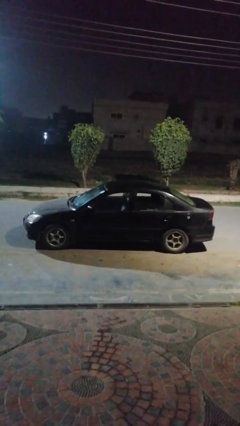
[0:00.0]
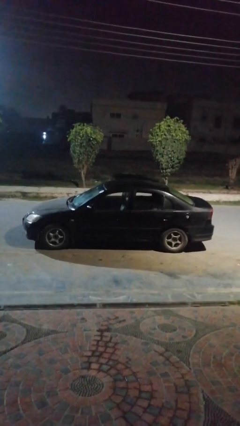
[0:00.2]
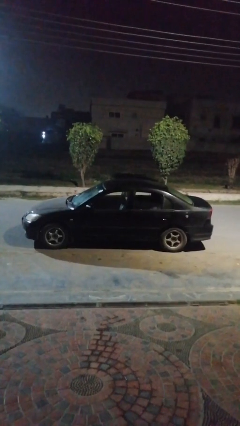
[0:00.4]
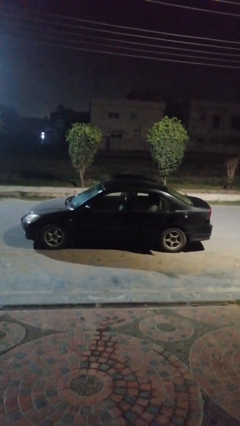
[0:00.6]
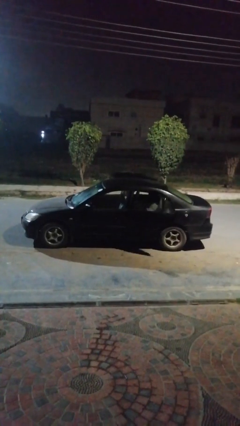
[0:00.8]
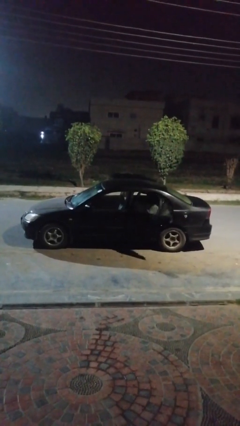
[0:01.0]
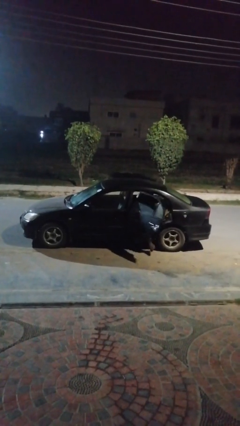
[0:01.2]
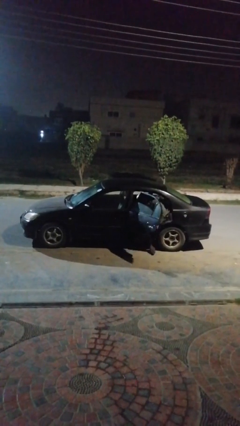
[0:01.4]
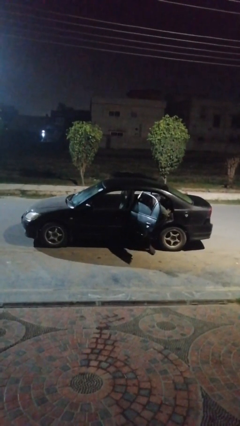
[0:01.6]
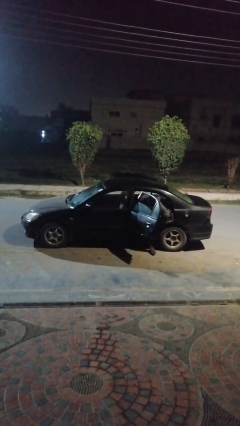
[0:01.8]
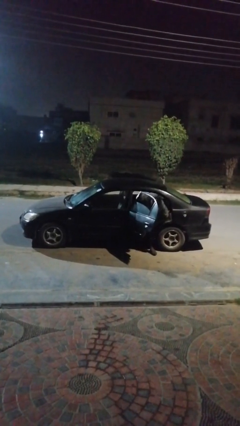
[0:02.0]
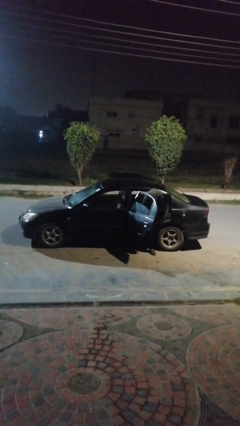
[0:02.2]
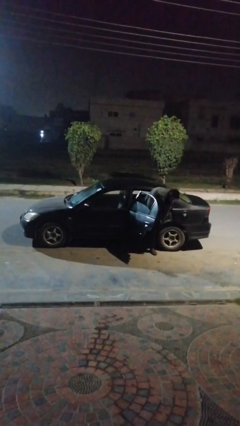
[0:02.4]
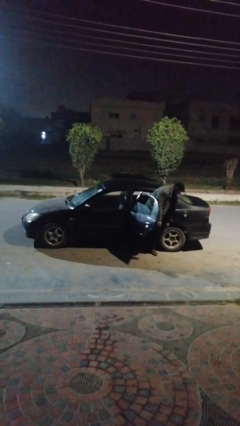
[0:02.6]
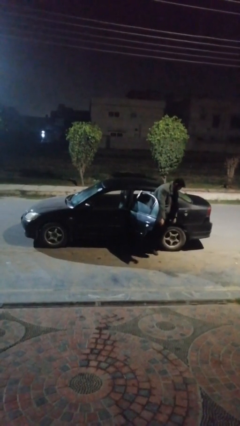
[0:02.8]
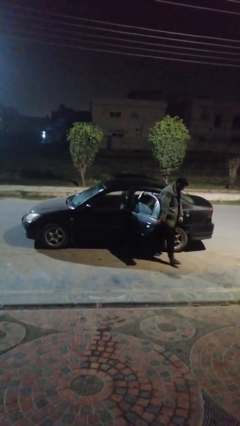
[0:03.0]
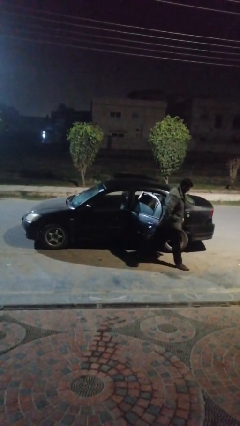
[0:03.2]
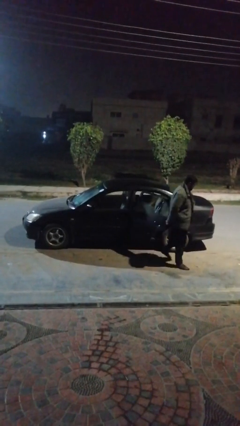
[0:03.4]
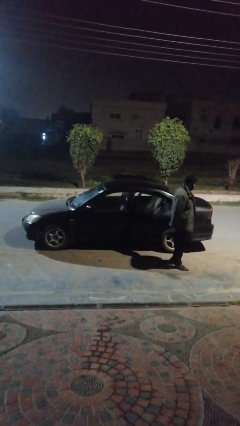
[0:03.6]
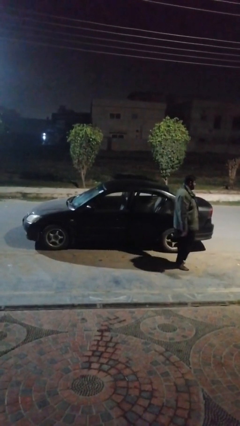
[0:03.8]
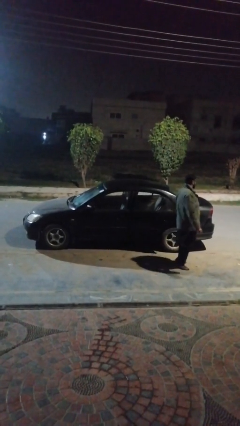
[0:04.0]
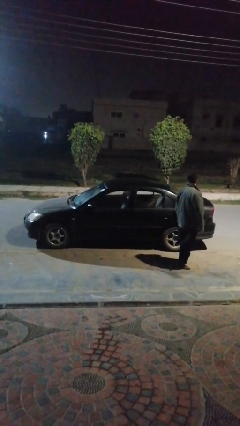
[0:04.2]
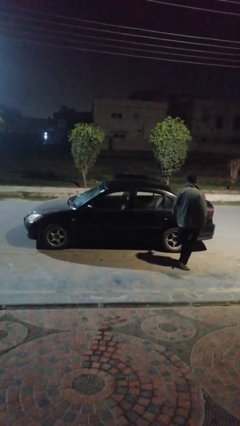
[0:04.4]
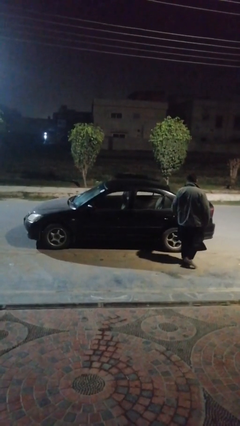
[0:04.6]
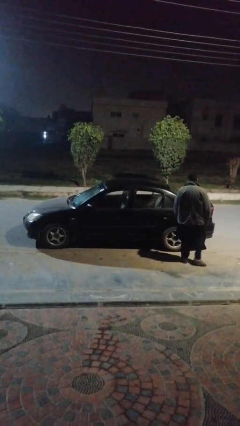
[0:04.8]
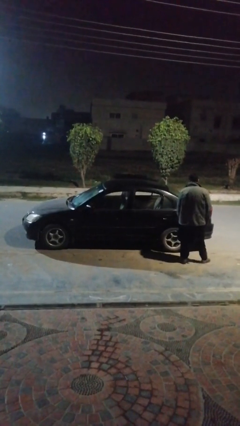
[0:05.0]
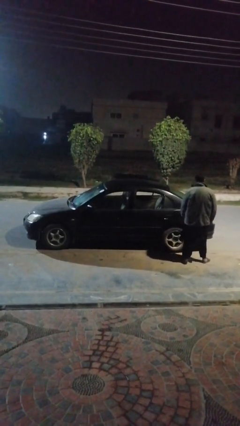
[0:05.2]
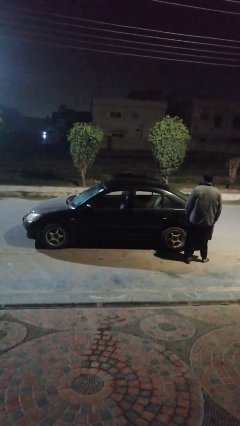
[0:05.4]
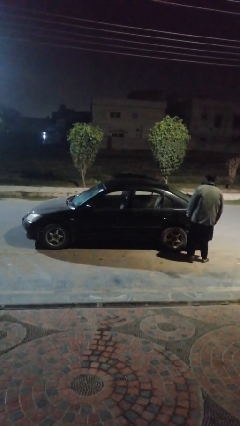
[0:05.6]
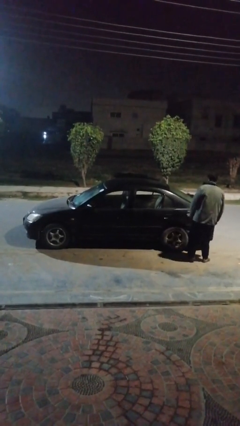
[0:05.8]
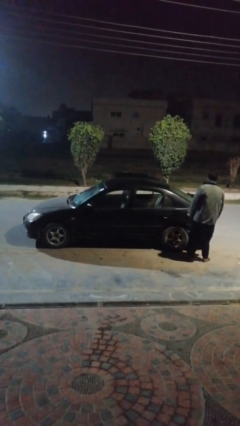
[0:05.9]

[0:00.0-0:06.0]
car drops off person

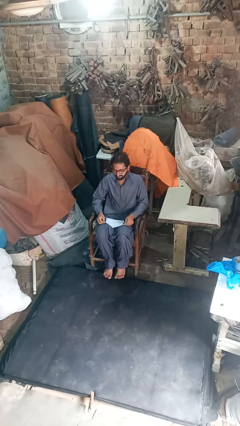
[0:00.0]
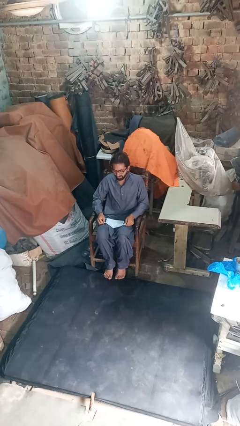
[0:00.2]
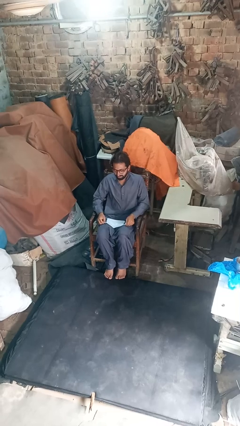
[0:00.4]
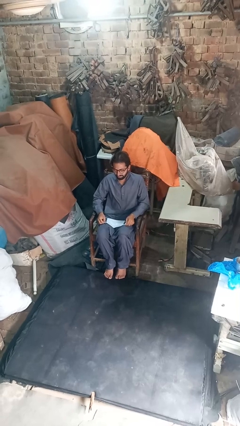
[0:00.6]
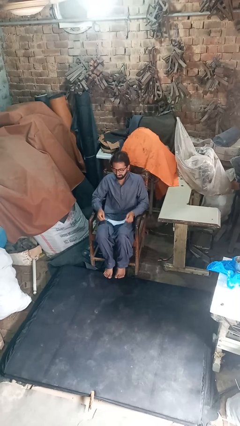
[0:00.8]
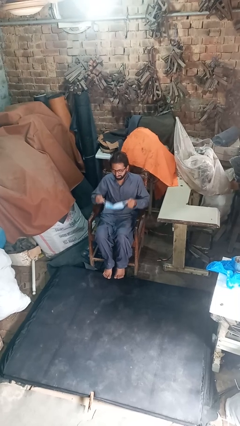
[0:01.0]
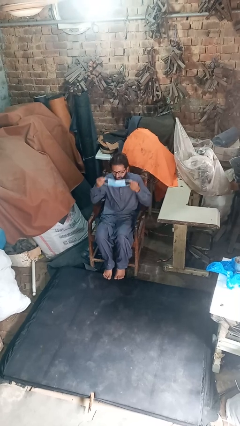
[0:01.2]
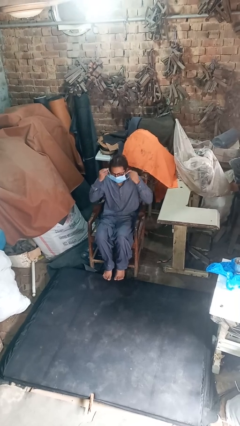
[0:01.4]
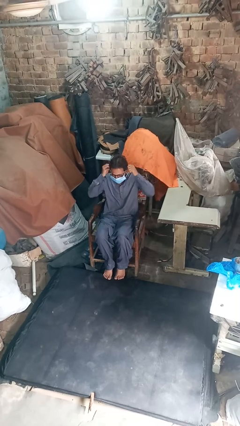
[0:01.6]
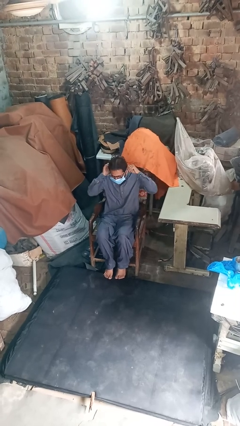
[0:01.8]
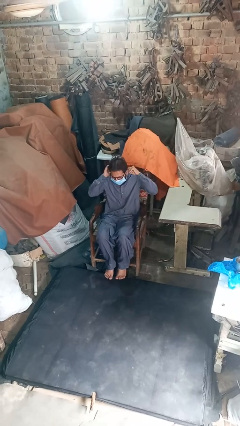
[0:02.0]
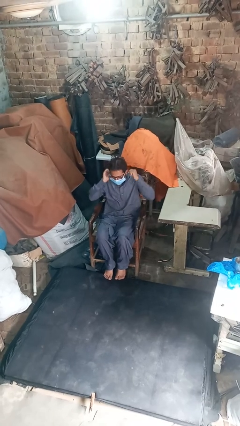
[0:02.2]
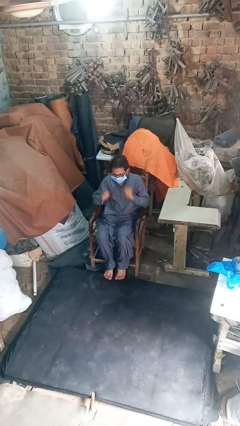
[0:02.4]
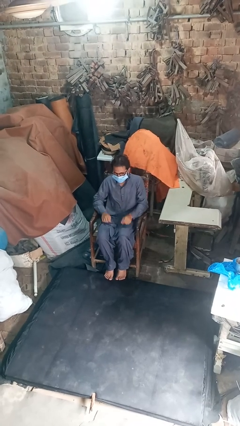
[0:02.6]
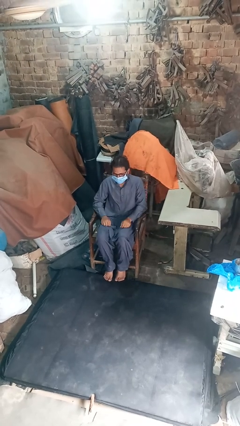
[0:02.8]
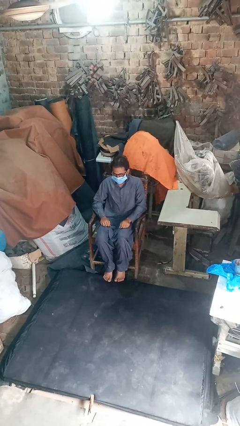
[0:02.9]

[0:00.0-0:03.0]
person puts on facemask

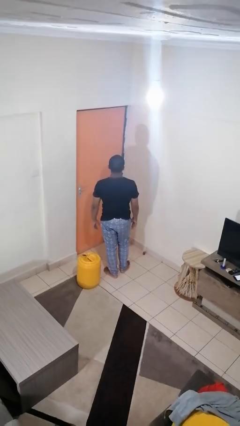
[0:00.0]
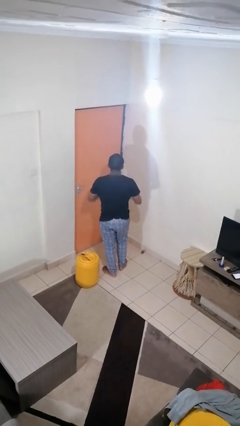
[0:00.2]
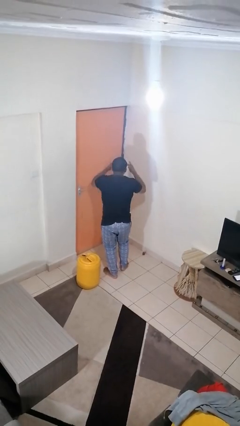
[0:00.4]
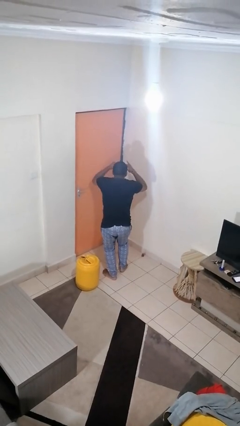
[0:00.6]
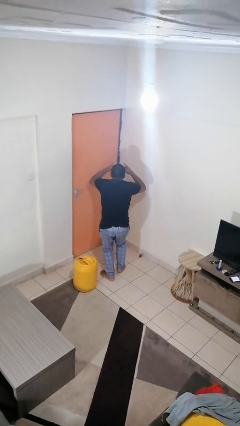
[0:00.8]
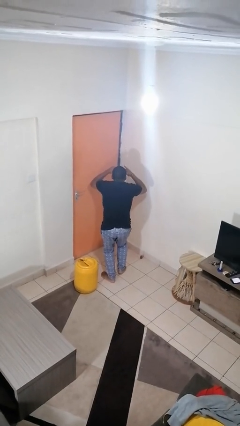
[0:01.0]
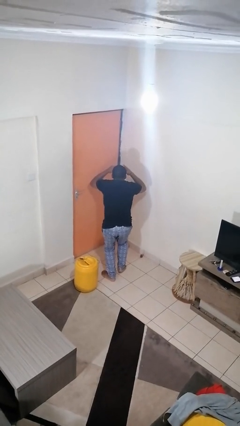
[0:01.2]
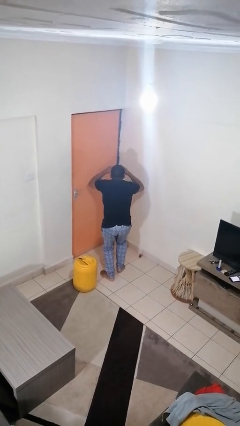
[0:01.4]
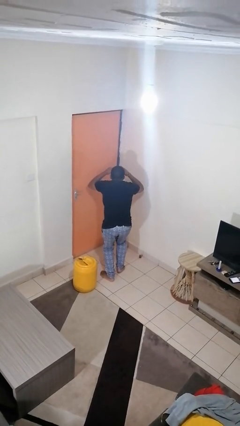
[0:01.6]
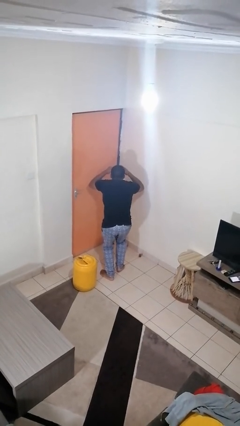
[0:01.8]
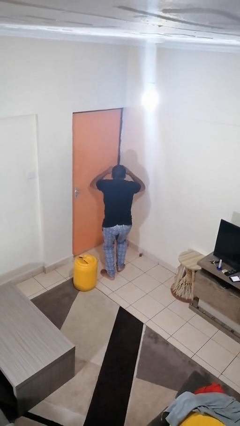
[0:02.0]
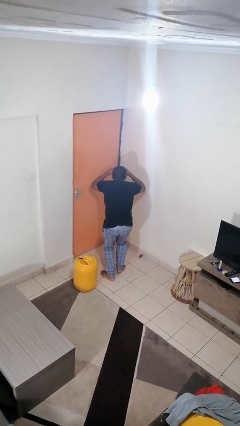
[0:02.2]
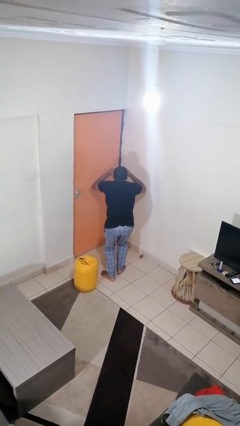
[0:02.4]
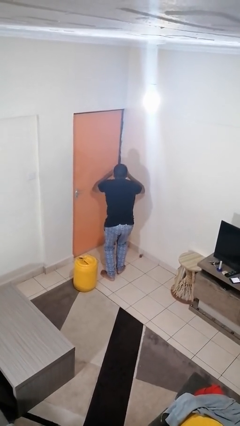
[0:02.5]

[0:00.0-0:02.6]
person shades eyes

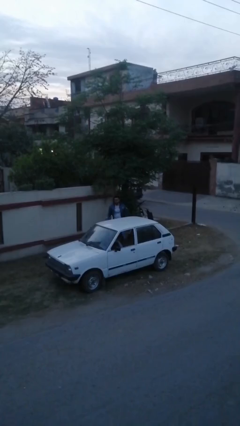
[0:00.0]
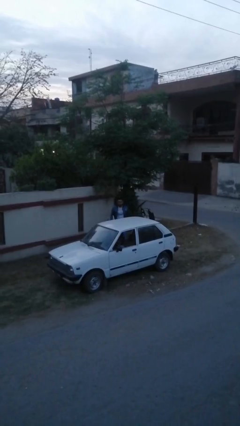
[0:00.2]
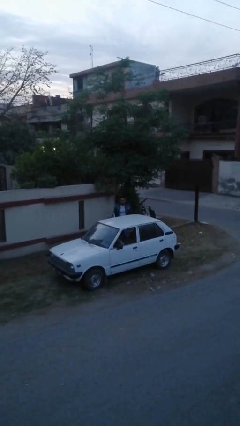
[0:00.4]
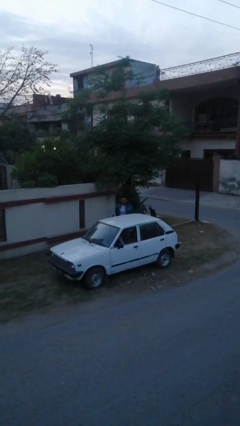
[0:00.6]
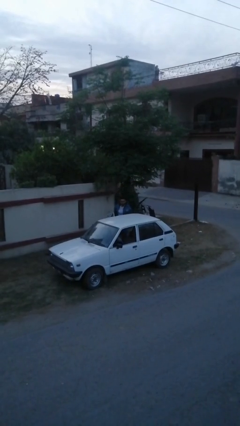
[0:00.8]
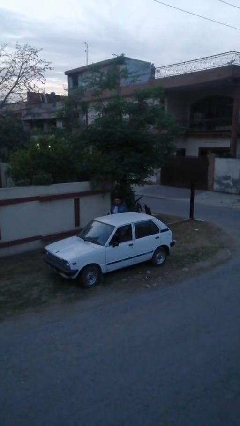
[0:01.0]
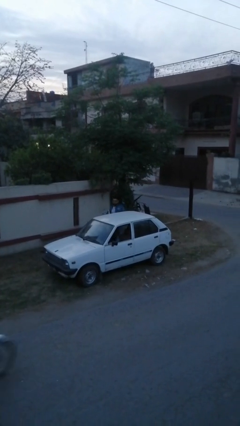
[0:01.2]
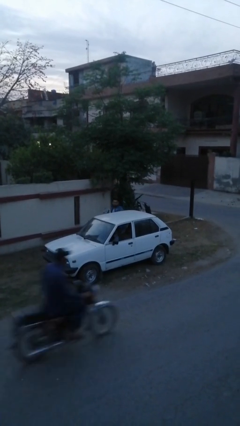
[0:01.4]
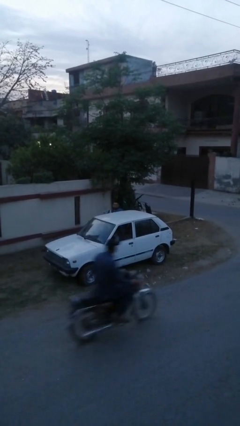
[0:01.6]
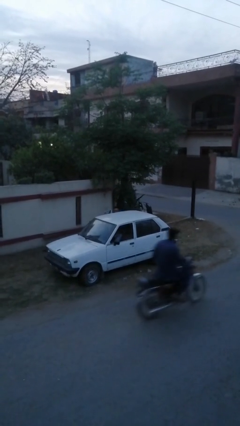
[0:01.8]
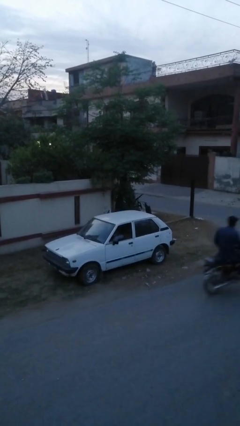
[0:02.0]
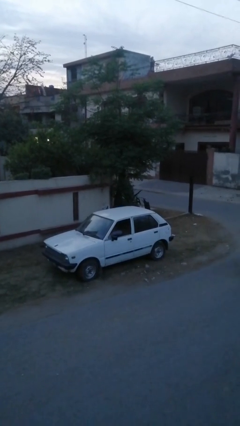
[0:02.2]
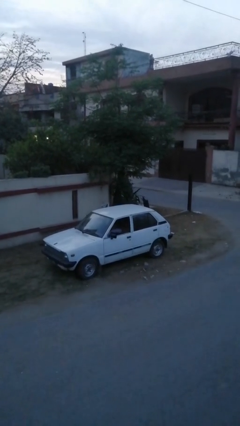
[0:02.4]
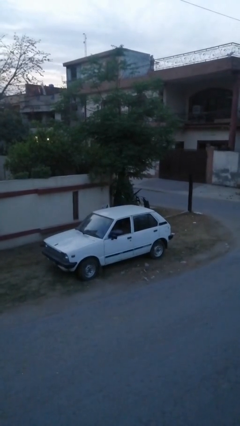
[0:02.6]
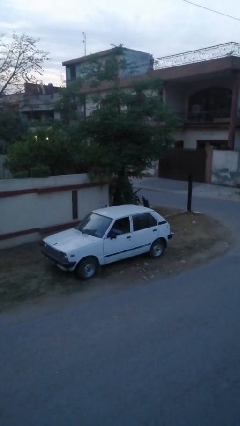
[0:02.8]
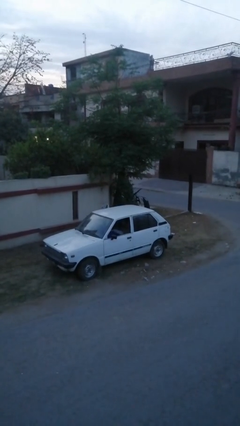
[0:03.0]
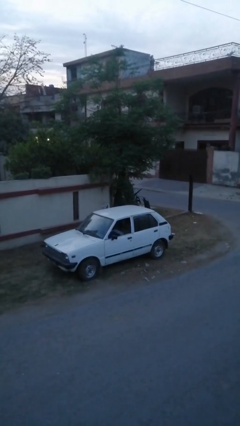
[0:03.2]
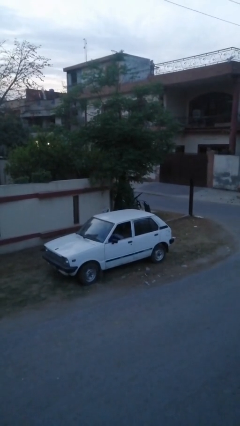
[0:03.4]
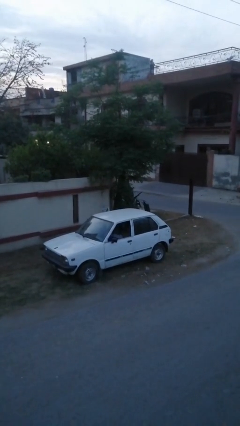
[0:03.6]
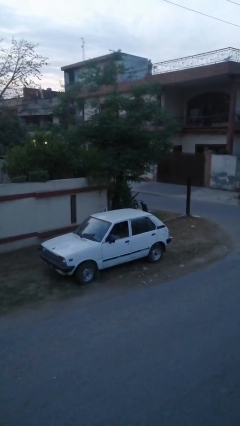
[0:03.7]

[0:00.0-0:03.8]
person enters car

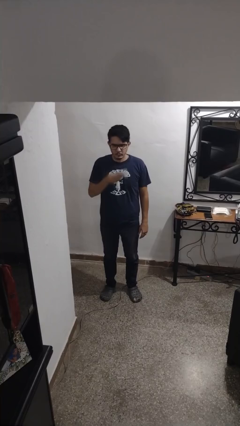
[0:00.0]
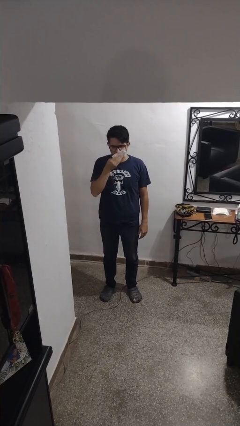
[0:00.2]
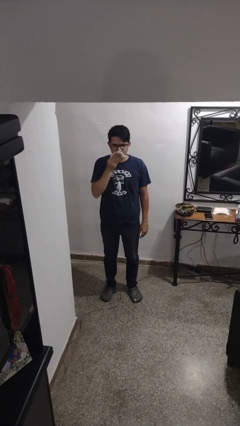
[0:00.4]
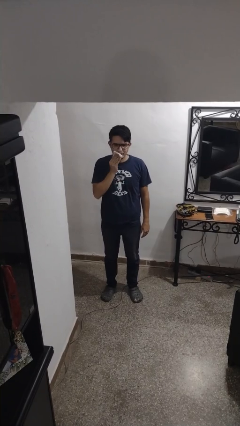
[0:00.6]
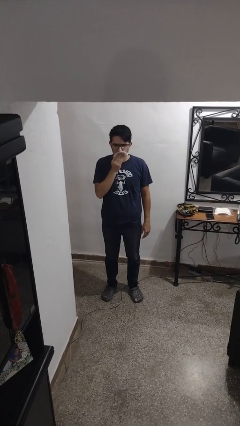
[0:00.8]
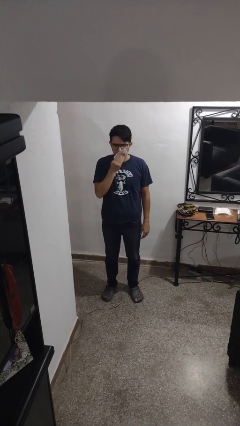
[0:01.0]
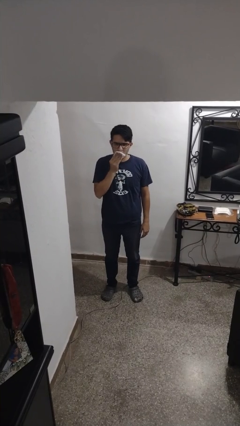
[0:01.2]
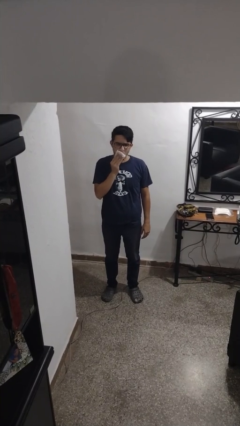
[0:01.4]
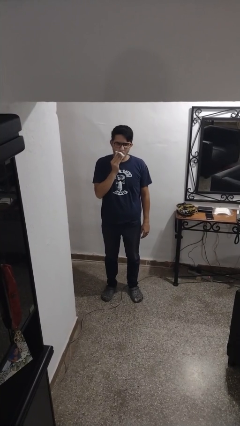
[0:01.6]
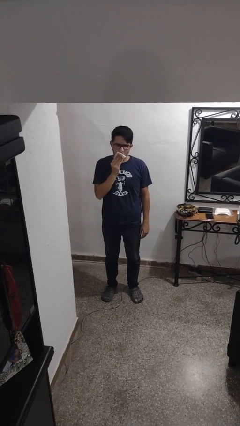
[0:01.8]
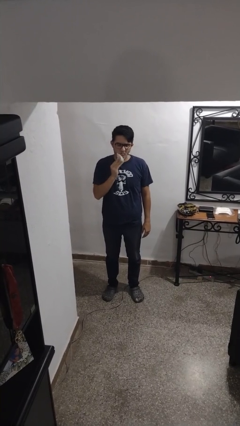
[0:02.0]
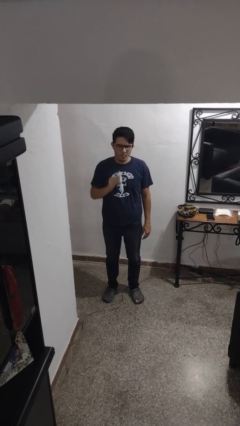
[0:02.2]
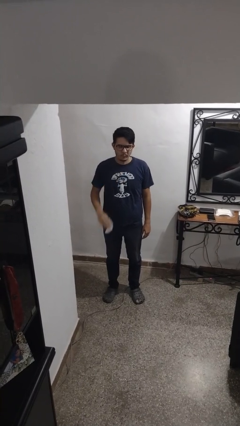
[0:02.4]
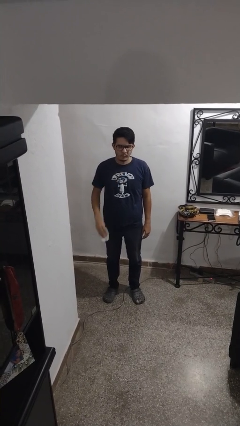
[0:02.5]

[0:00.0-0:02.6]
person wipes mouth with napkin
